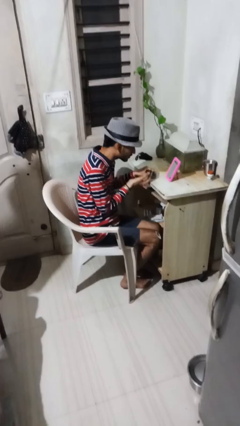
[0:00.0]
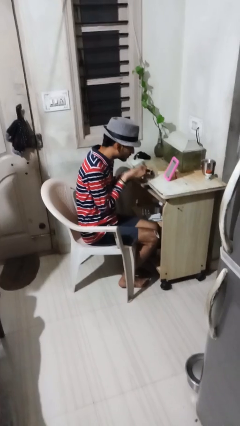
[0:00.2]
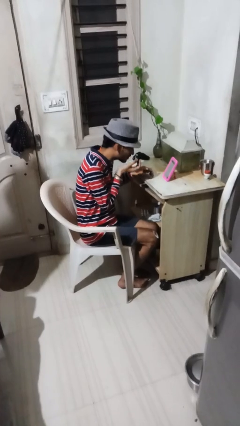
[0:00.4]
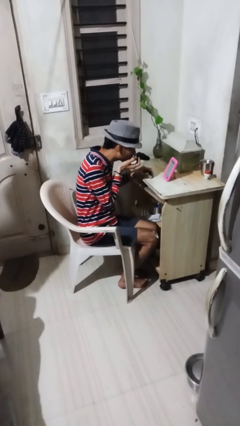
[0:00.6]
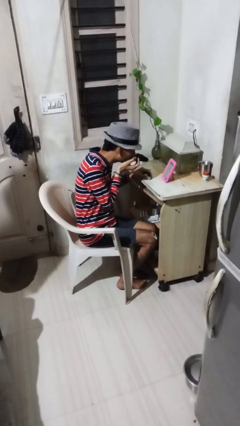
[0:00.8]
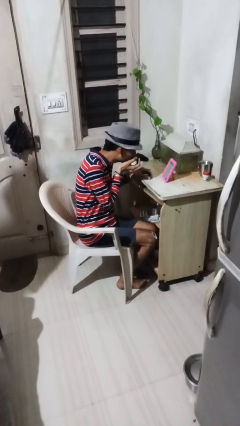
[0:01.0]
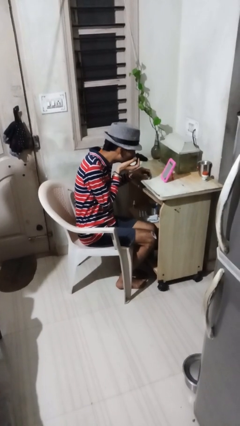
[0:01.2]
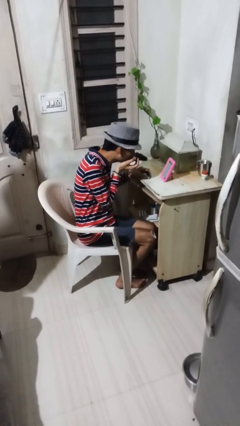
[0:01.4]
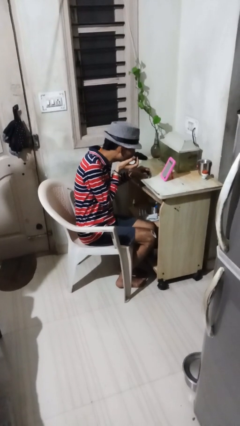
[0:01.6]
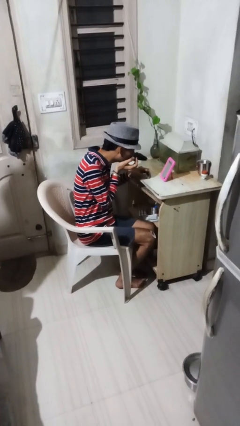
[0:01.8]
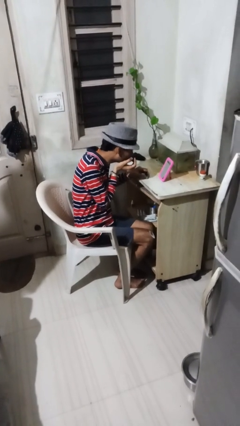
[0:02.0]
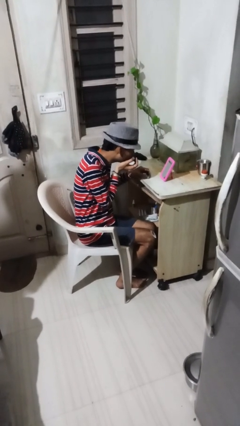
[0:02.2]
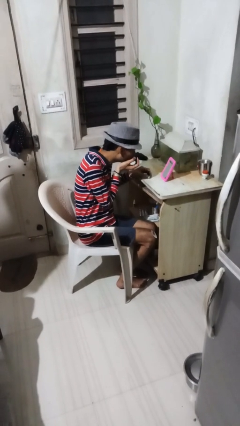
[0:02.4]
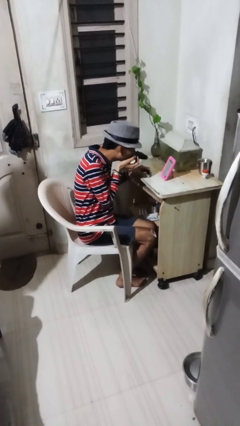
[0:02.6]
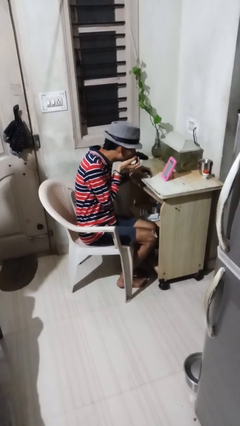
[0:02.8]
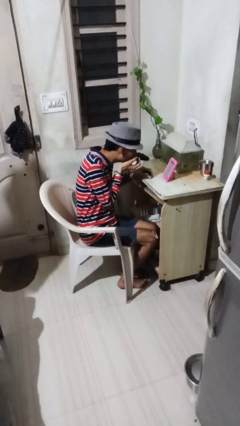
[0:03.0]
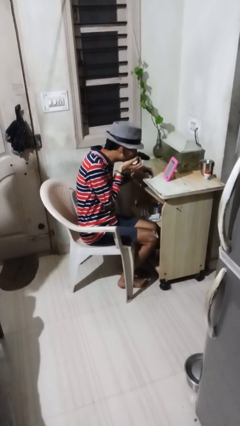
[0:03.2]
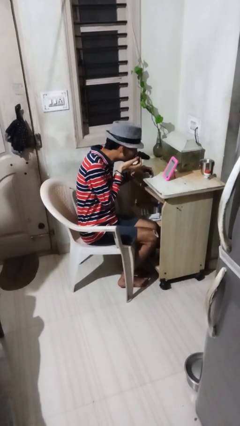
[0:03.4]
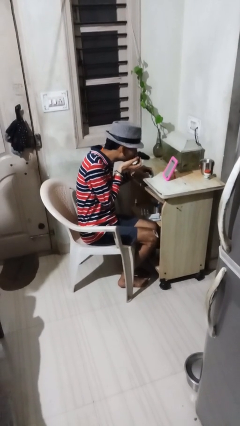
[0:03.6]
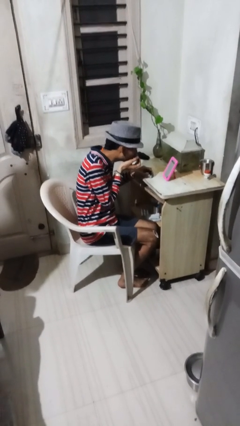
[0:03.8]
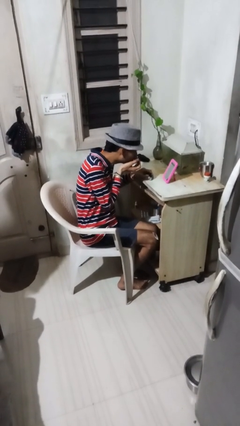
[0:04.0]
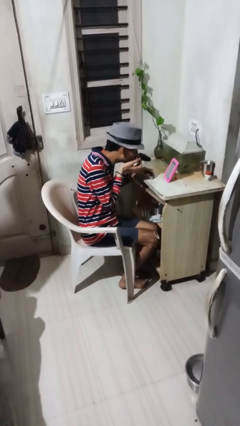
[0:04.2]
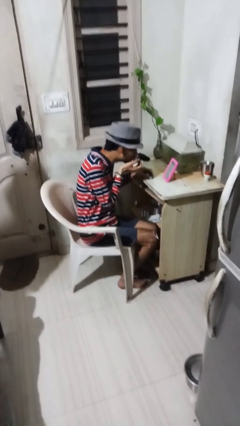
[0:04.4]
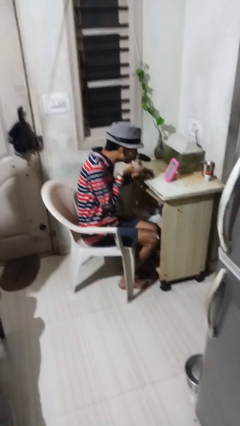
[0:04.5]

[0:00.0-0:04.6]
person applies eye makeup

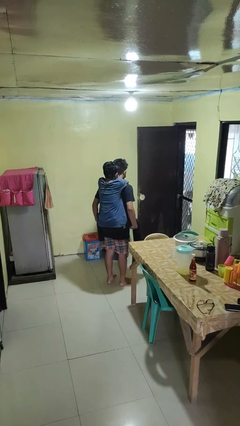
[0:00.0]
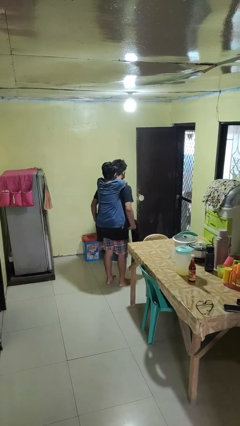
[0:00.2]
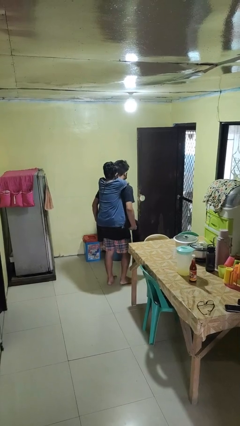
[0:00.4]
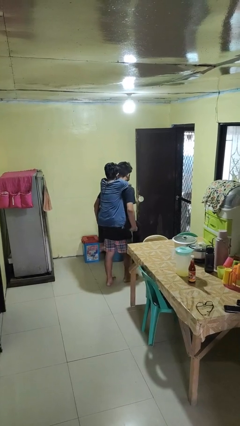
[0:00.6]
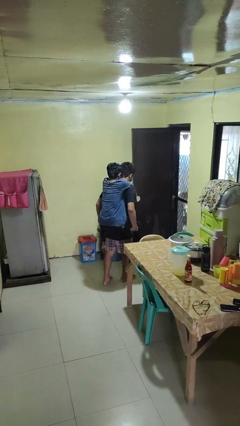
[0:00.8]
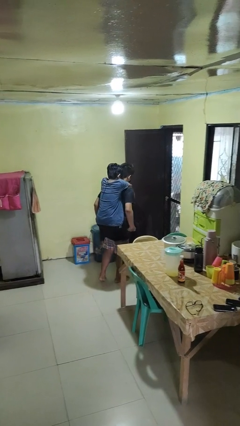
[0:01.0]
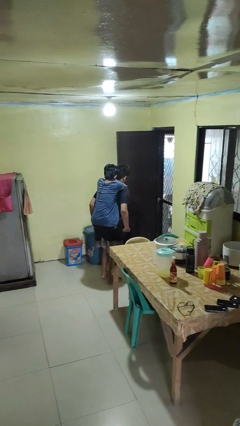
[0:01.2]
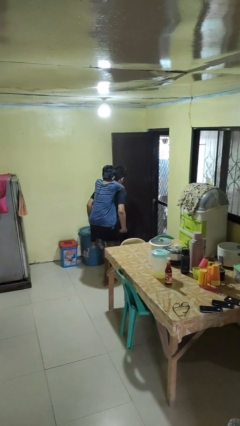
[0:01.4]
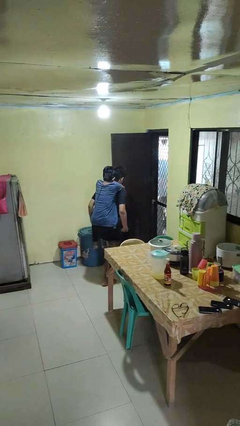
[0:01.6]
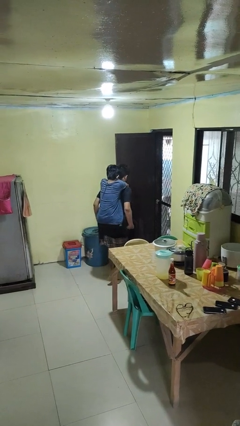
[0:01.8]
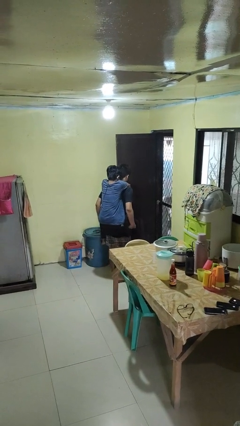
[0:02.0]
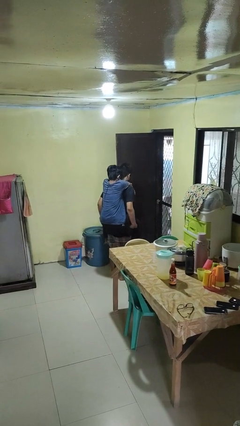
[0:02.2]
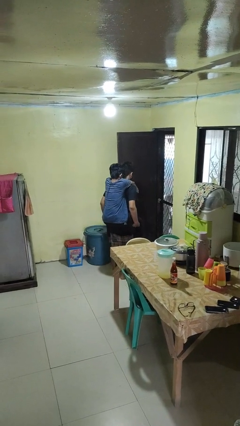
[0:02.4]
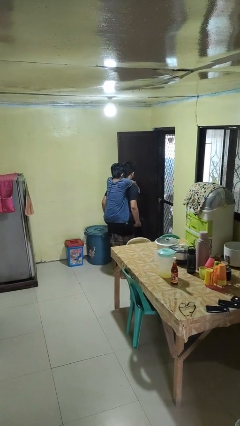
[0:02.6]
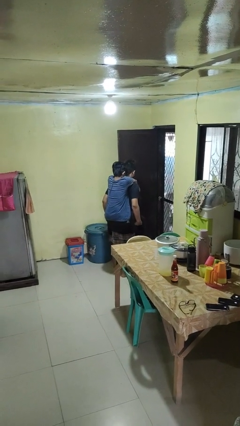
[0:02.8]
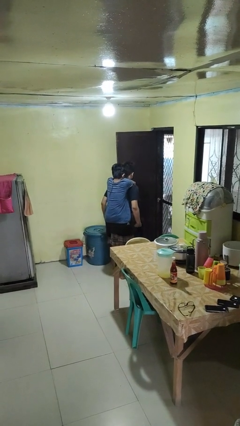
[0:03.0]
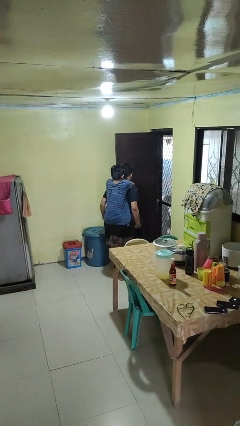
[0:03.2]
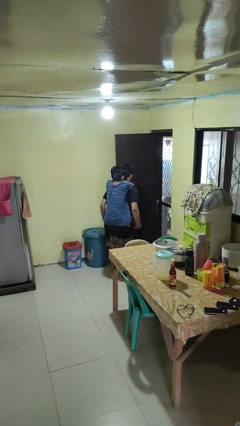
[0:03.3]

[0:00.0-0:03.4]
person carries person on back

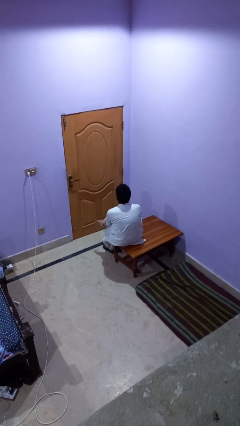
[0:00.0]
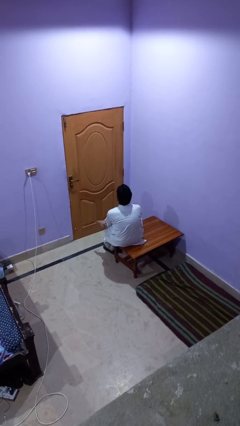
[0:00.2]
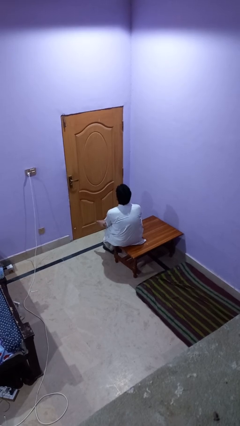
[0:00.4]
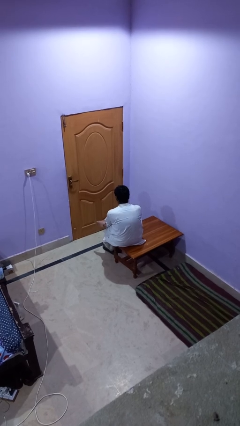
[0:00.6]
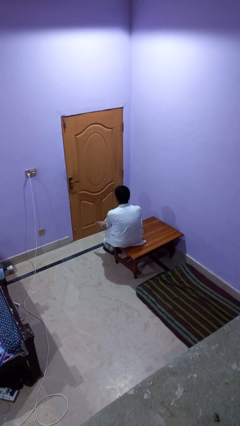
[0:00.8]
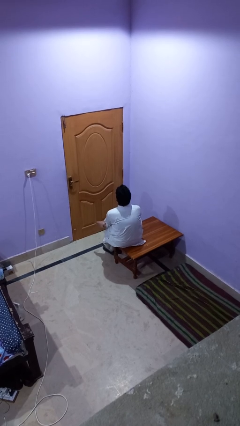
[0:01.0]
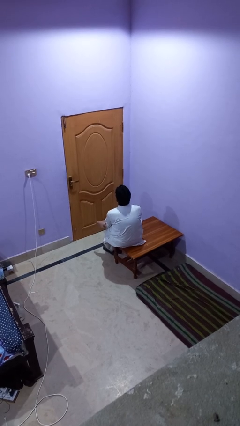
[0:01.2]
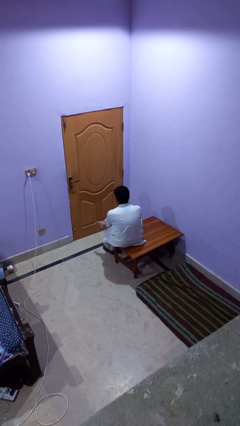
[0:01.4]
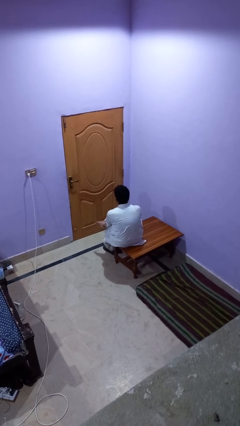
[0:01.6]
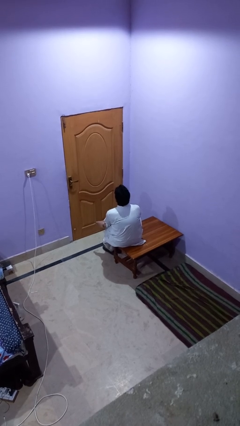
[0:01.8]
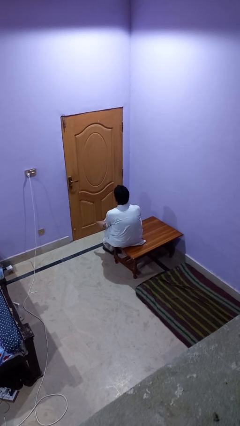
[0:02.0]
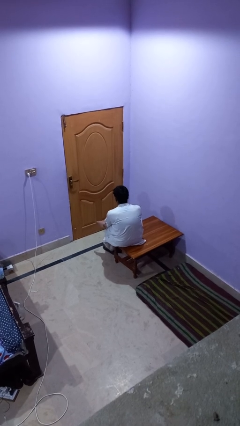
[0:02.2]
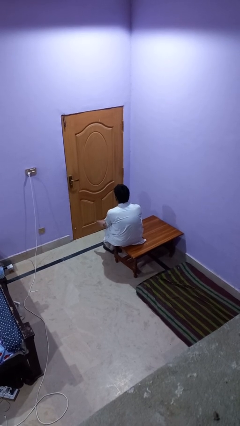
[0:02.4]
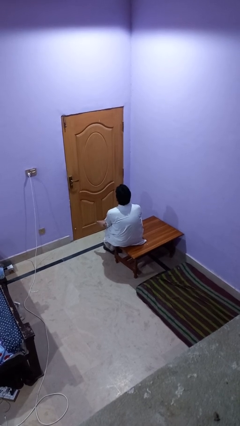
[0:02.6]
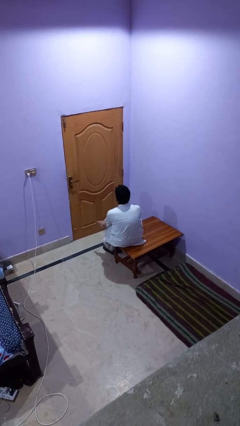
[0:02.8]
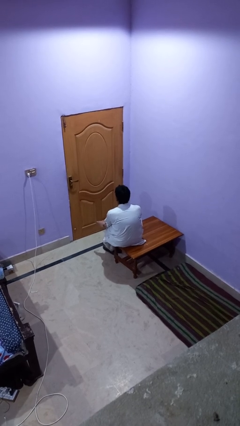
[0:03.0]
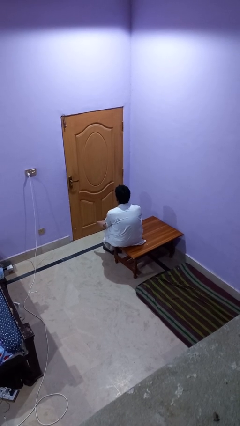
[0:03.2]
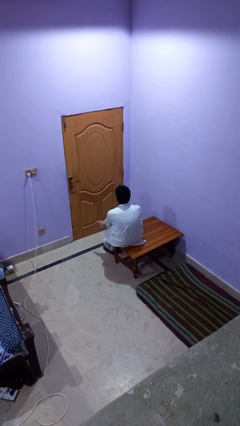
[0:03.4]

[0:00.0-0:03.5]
person nods head

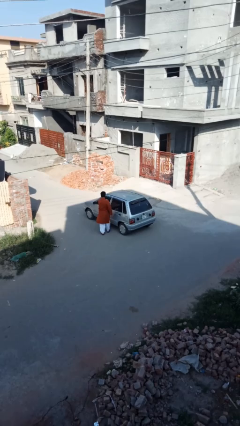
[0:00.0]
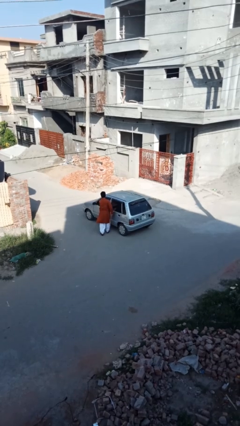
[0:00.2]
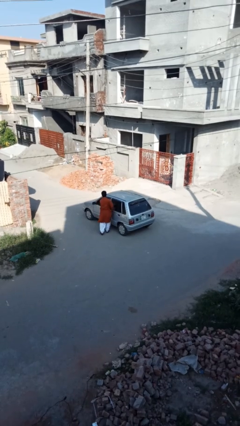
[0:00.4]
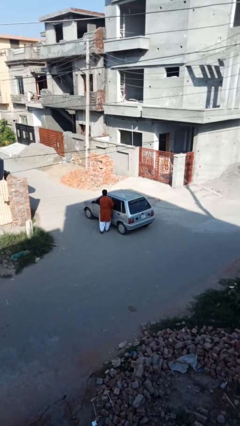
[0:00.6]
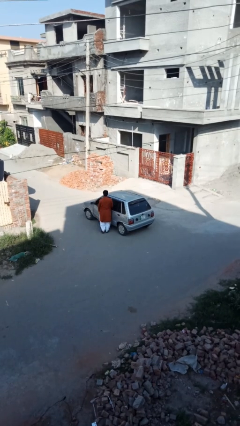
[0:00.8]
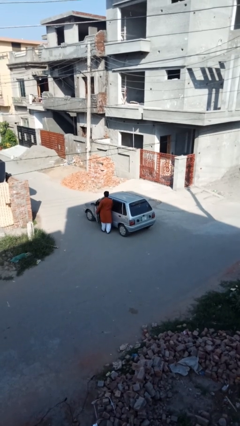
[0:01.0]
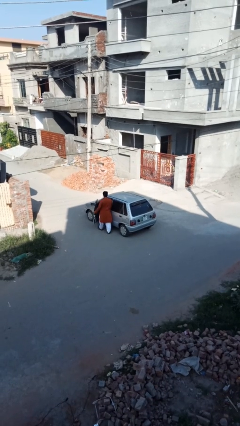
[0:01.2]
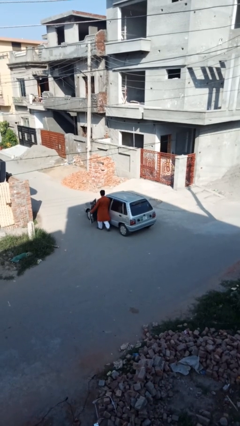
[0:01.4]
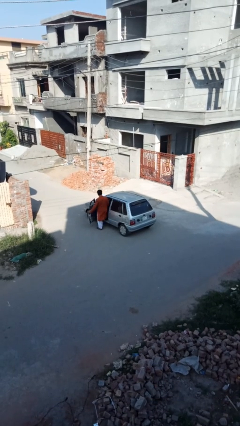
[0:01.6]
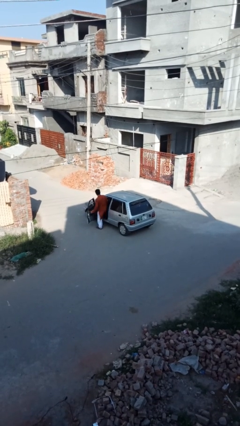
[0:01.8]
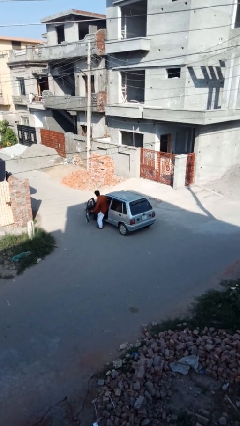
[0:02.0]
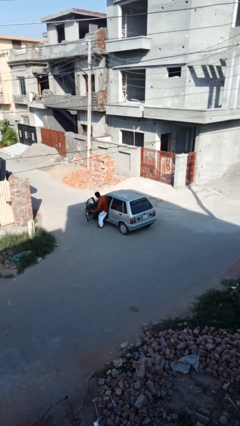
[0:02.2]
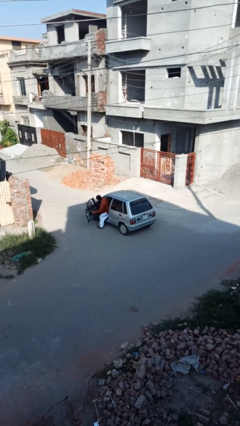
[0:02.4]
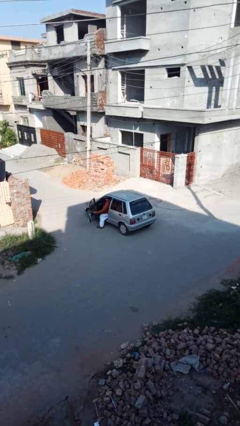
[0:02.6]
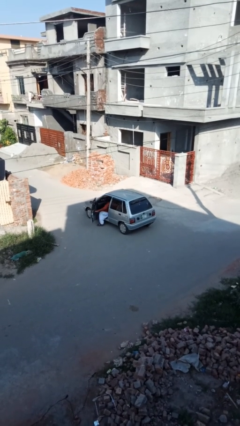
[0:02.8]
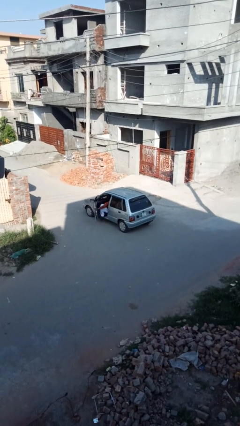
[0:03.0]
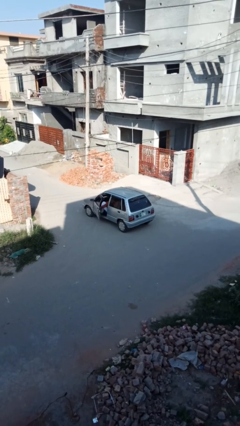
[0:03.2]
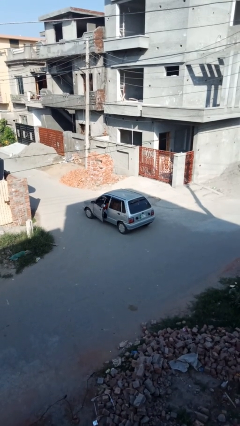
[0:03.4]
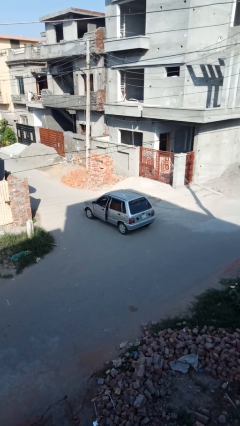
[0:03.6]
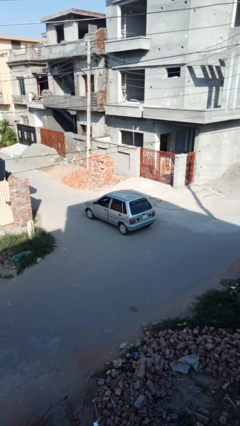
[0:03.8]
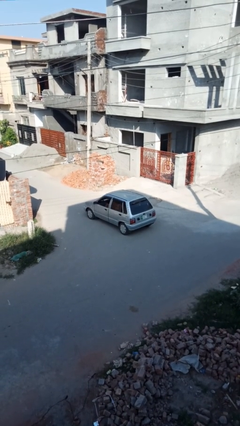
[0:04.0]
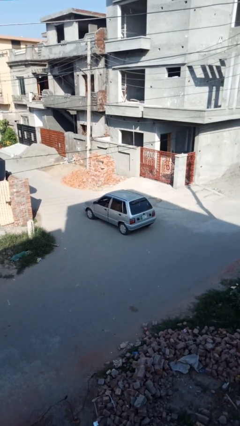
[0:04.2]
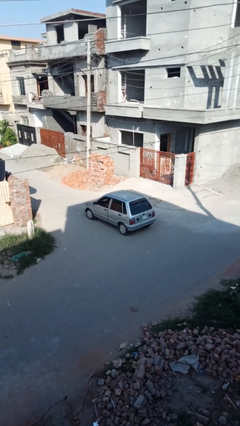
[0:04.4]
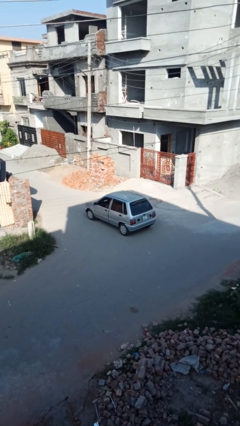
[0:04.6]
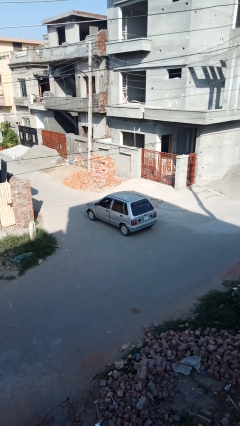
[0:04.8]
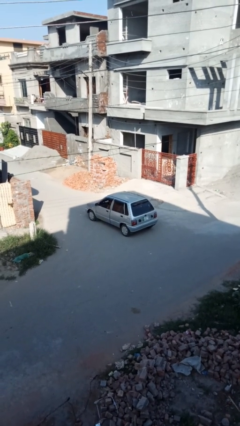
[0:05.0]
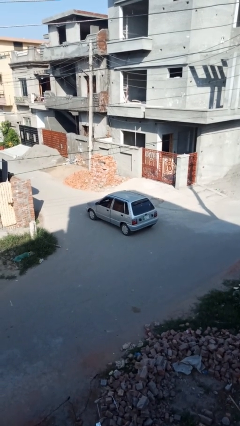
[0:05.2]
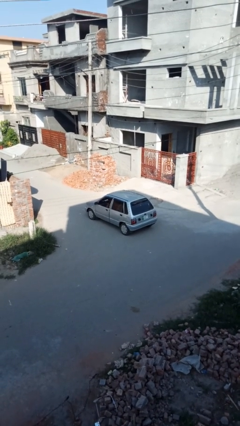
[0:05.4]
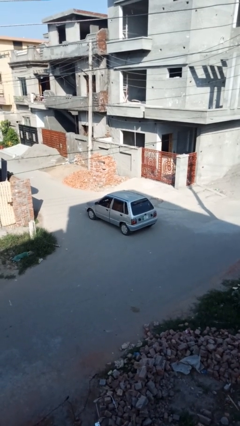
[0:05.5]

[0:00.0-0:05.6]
car picks up person

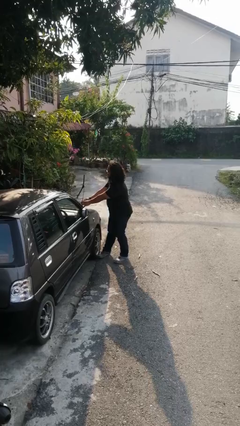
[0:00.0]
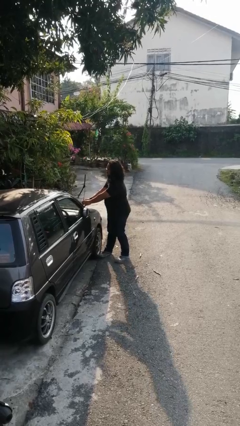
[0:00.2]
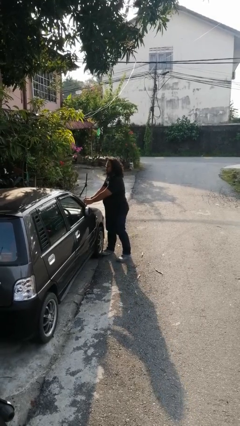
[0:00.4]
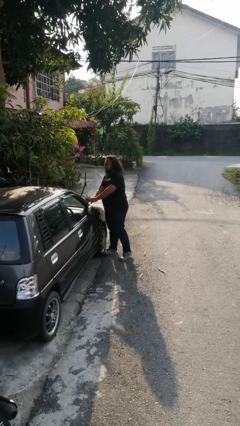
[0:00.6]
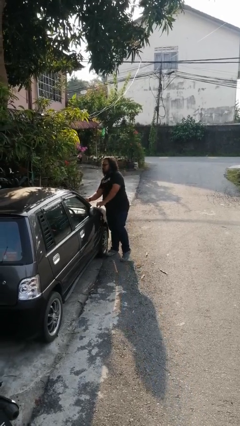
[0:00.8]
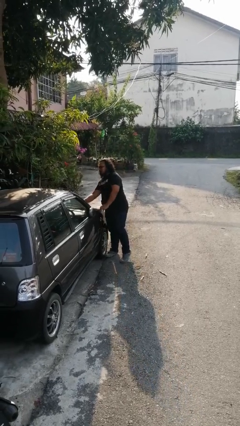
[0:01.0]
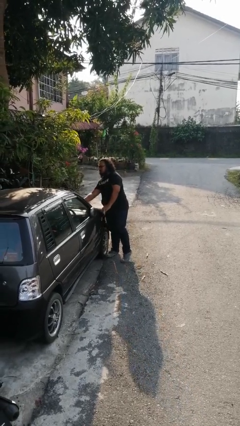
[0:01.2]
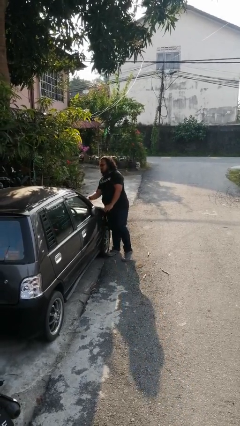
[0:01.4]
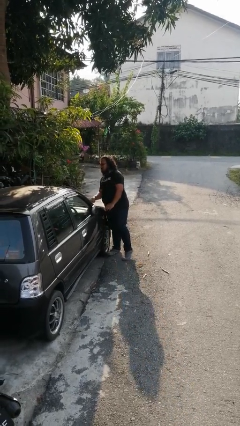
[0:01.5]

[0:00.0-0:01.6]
person flips down car wipers
